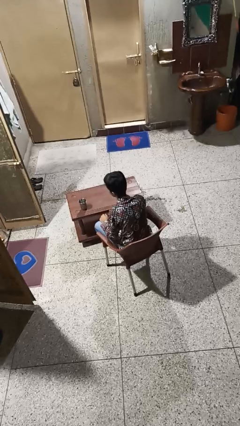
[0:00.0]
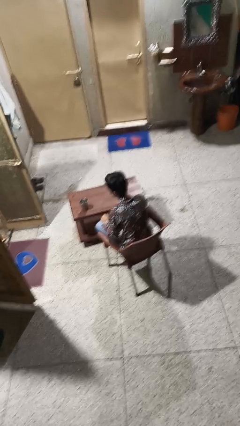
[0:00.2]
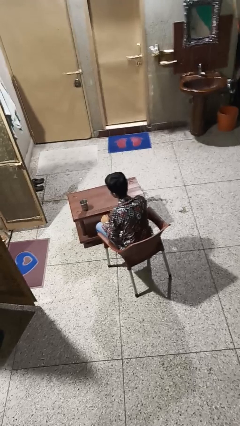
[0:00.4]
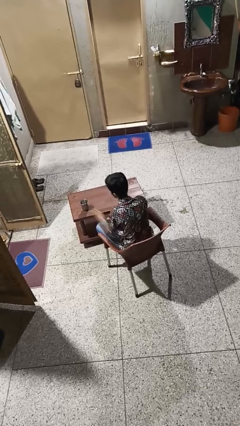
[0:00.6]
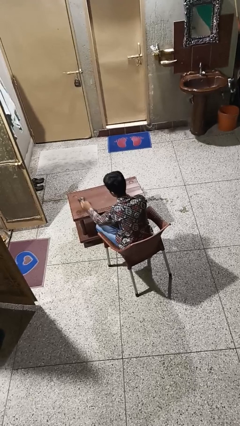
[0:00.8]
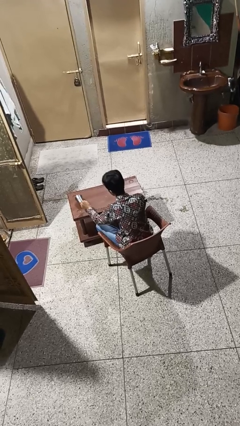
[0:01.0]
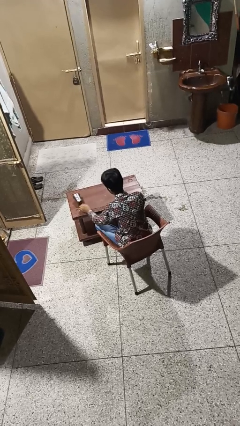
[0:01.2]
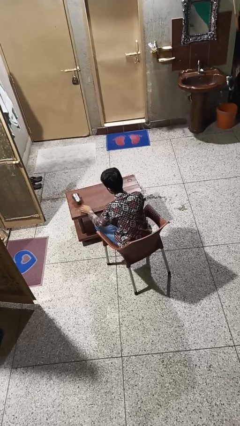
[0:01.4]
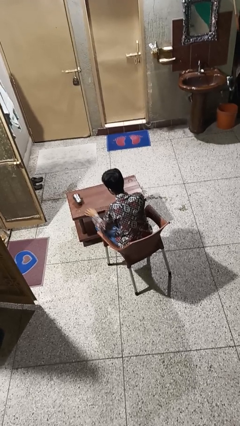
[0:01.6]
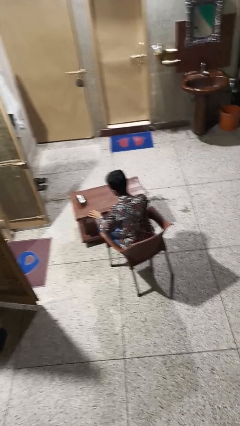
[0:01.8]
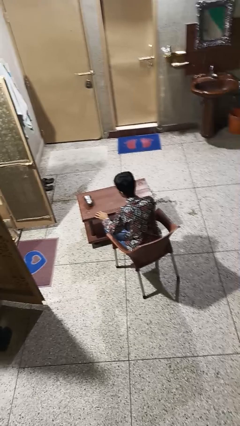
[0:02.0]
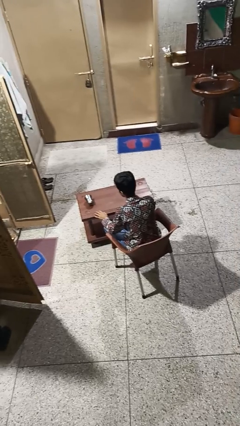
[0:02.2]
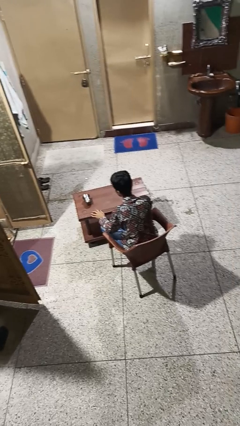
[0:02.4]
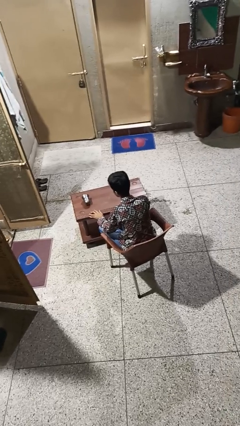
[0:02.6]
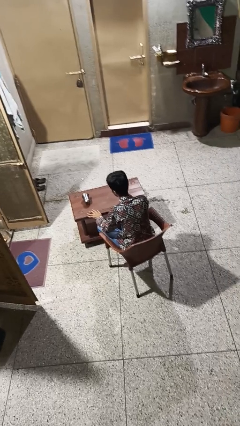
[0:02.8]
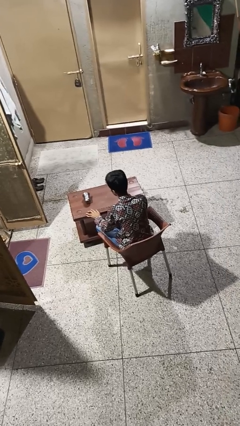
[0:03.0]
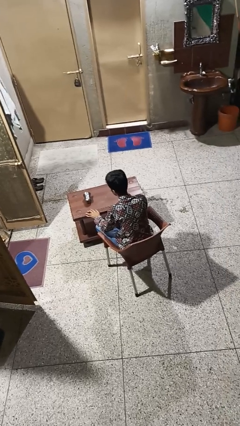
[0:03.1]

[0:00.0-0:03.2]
person knocks over glass

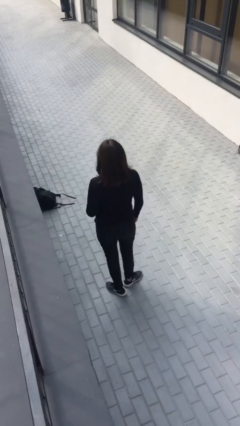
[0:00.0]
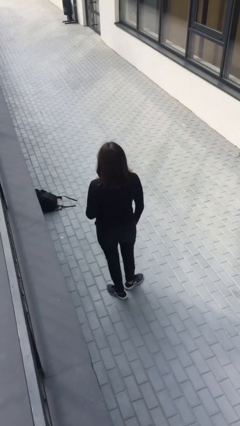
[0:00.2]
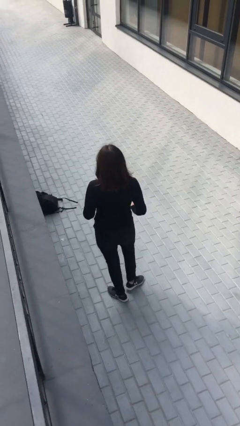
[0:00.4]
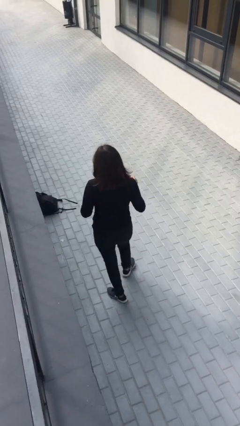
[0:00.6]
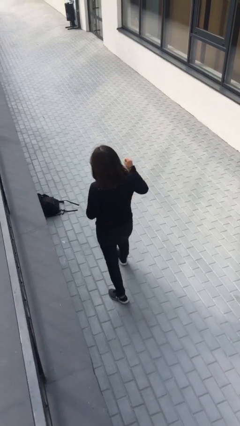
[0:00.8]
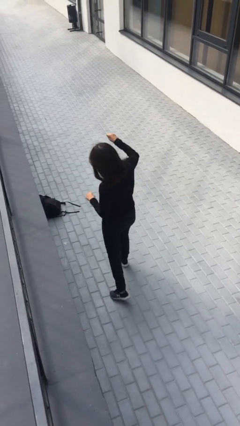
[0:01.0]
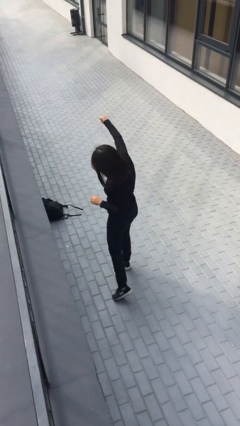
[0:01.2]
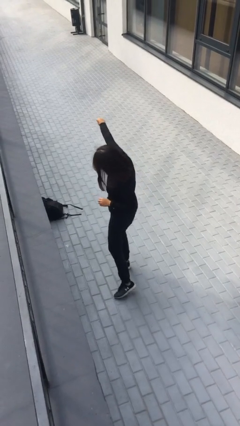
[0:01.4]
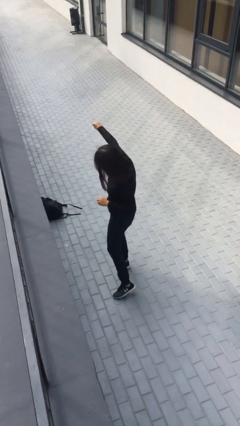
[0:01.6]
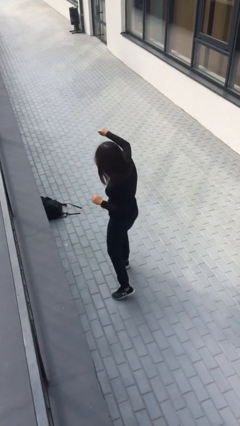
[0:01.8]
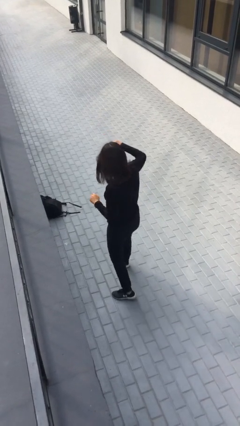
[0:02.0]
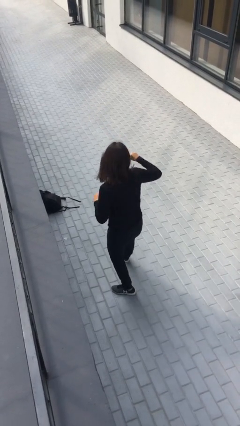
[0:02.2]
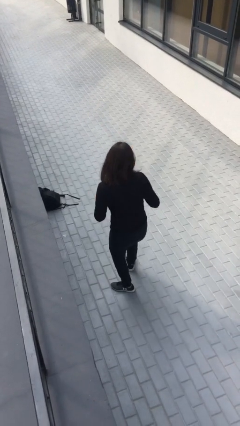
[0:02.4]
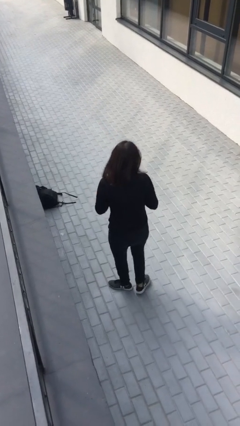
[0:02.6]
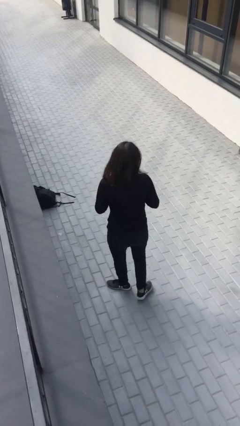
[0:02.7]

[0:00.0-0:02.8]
person punches

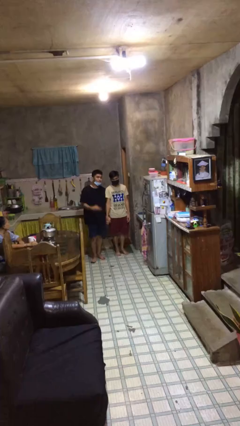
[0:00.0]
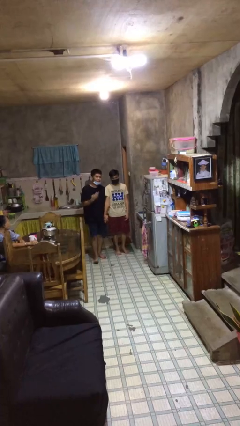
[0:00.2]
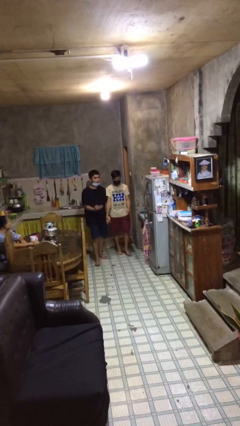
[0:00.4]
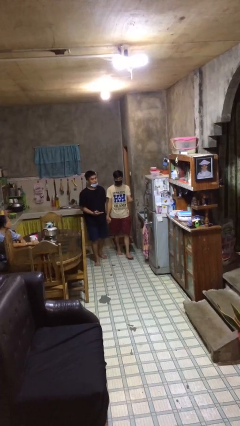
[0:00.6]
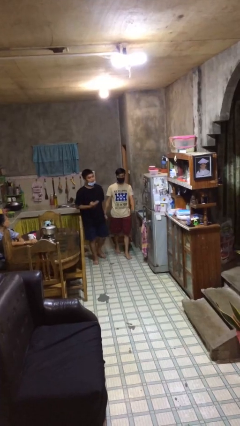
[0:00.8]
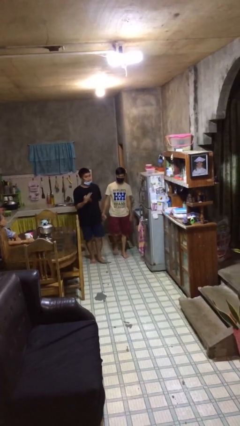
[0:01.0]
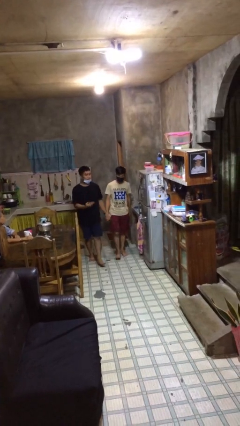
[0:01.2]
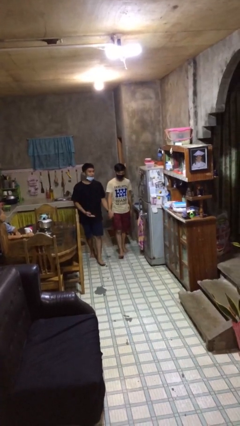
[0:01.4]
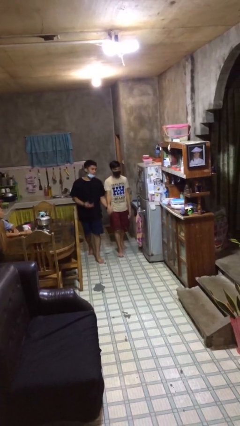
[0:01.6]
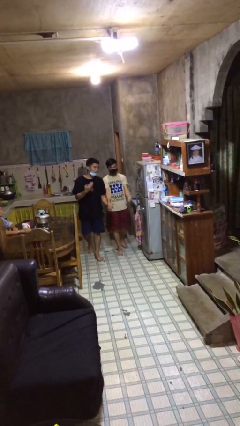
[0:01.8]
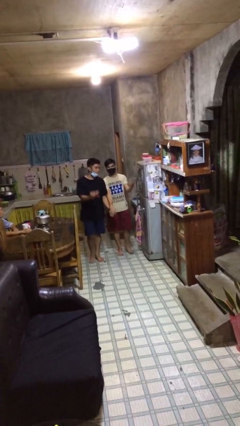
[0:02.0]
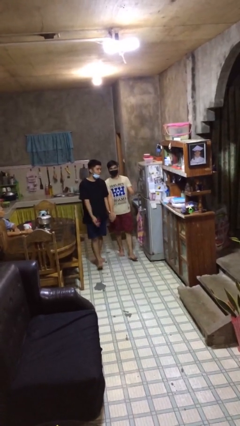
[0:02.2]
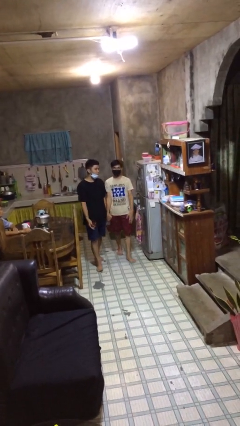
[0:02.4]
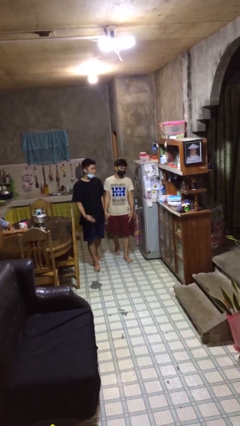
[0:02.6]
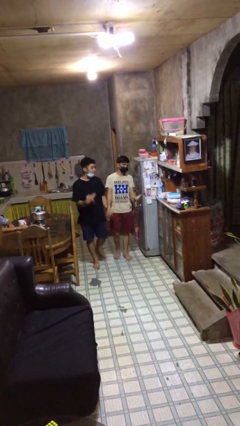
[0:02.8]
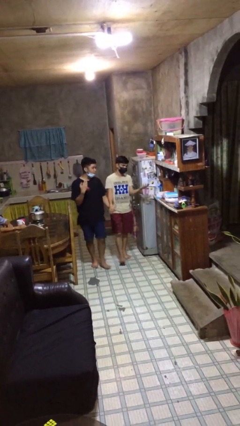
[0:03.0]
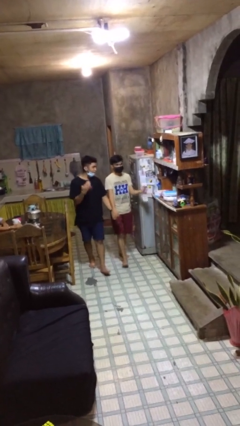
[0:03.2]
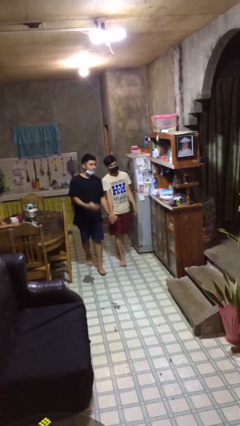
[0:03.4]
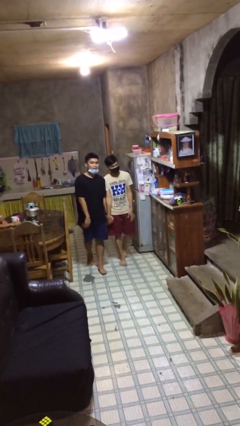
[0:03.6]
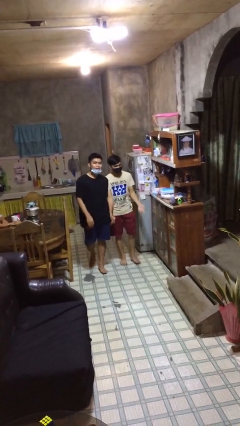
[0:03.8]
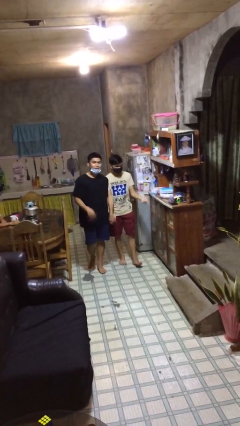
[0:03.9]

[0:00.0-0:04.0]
person holds hand

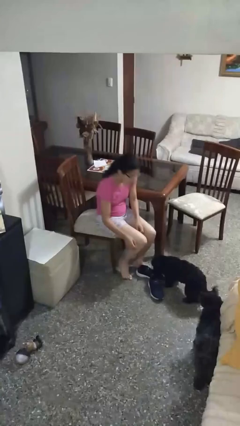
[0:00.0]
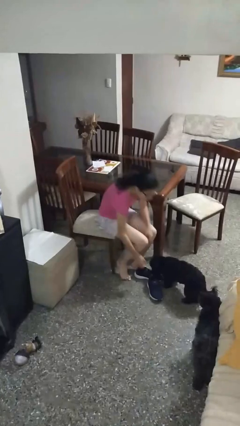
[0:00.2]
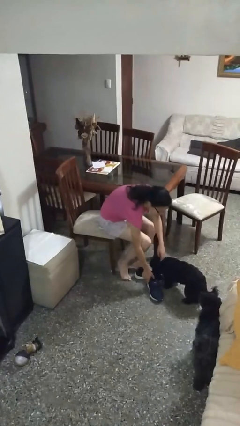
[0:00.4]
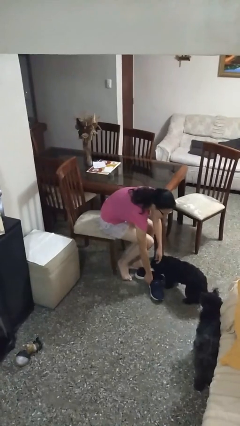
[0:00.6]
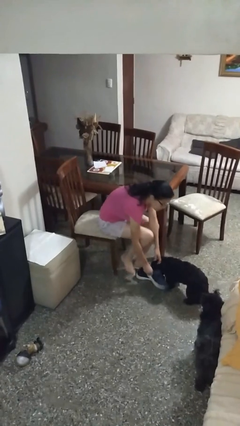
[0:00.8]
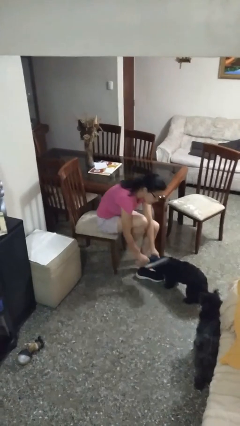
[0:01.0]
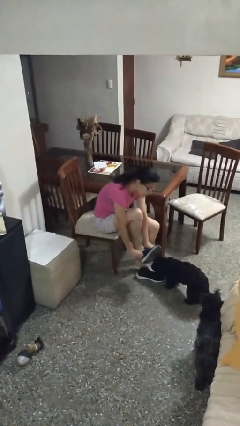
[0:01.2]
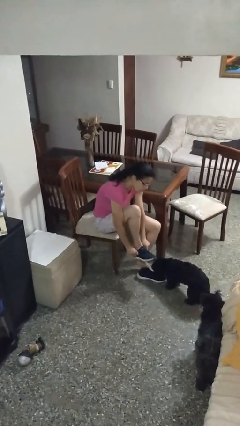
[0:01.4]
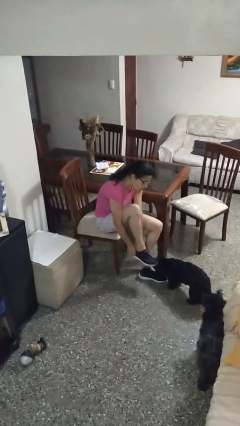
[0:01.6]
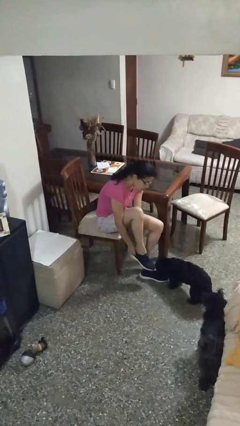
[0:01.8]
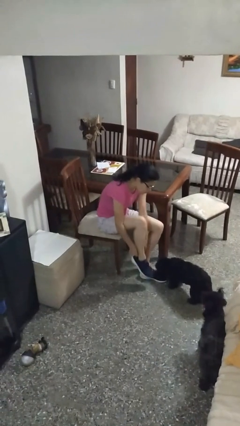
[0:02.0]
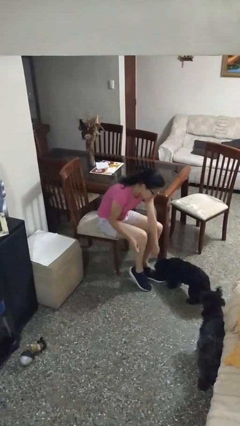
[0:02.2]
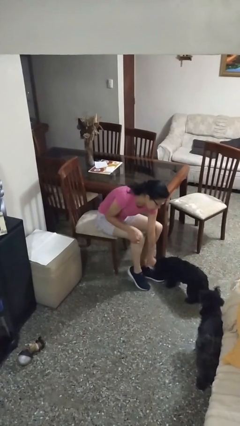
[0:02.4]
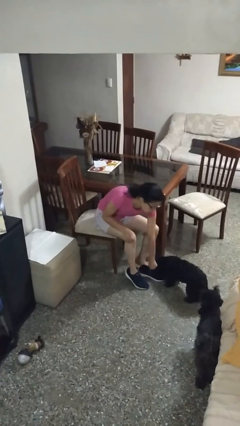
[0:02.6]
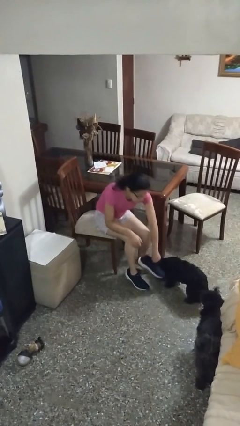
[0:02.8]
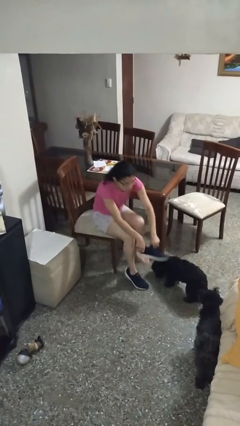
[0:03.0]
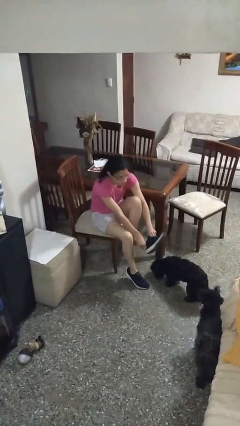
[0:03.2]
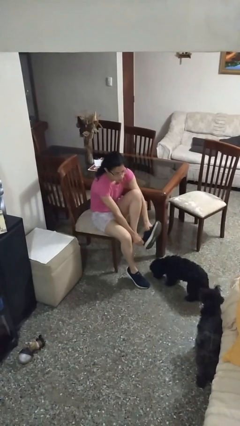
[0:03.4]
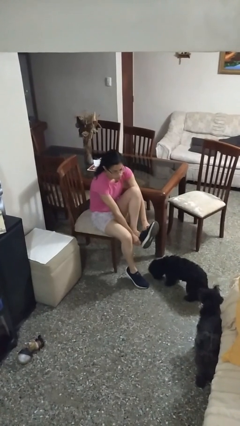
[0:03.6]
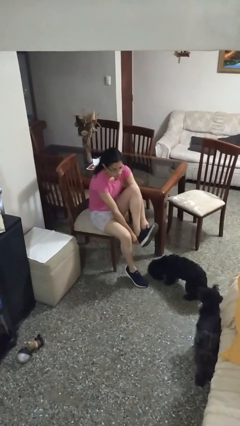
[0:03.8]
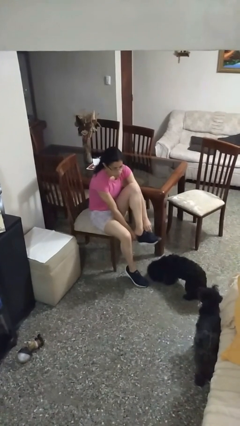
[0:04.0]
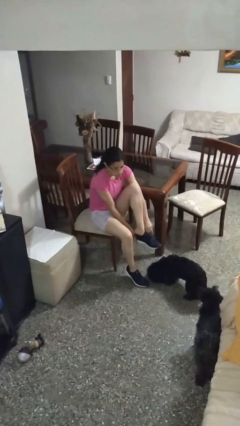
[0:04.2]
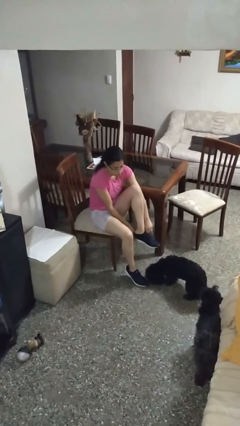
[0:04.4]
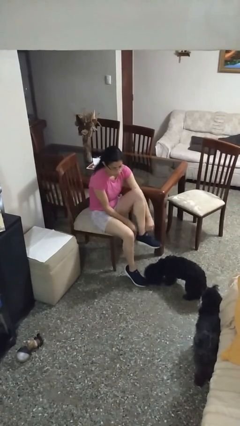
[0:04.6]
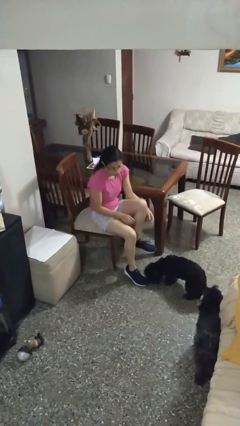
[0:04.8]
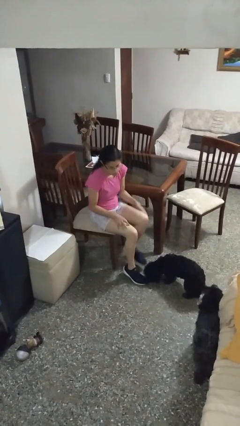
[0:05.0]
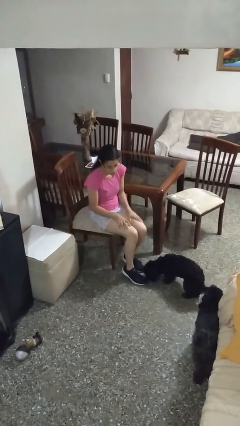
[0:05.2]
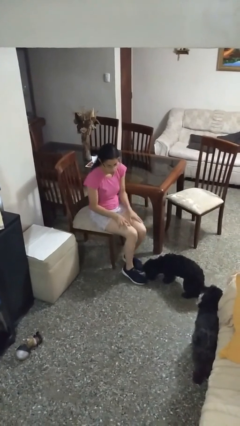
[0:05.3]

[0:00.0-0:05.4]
person puts on shoes

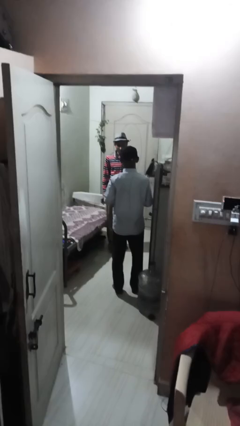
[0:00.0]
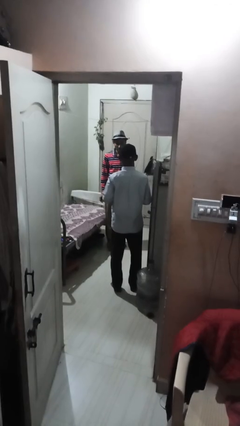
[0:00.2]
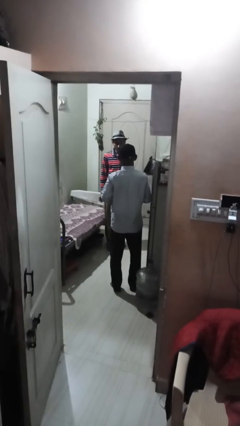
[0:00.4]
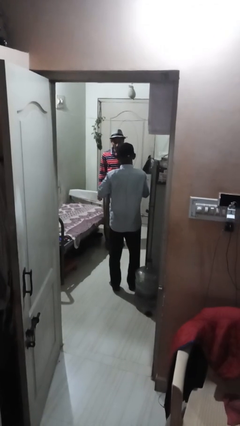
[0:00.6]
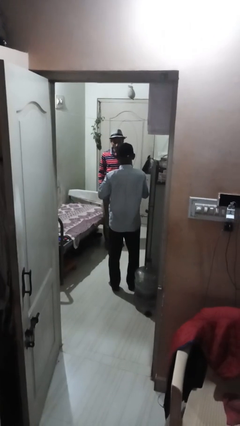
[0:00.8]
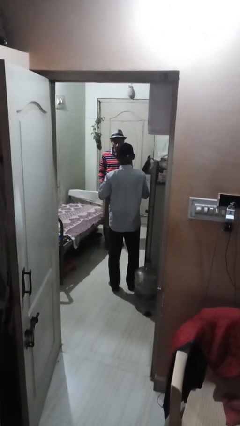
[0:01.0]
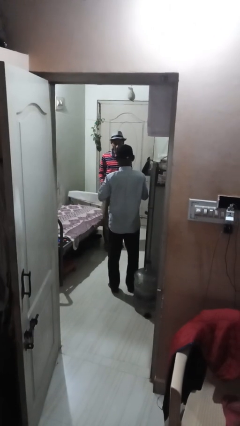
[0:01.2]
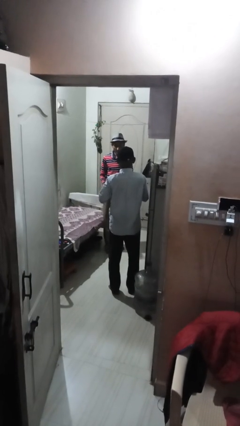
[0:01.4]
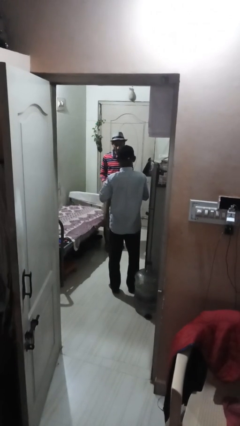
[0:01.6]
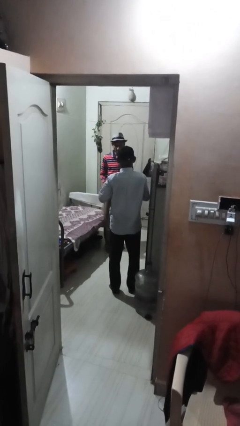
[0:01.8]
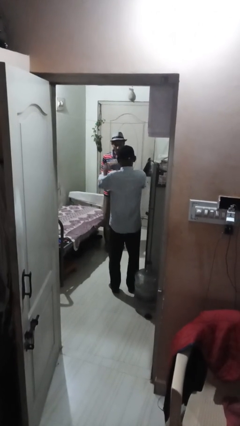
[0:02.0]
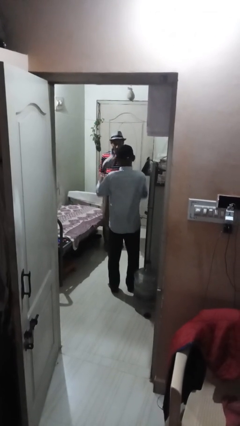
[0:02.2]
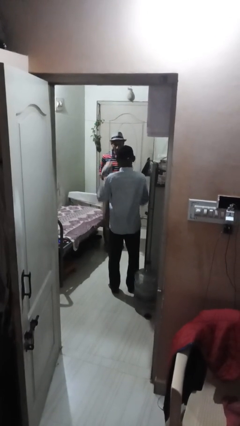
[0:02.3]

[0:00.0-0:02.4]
person throws object to person
